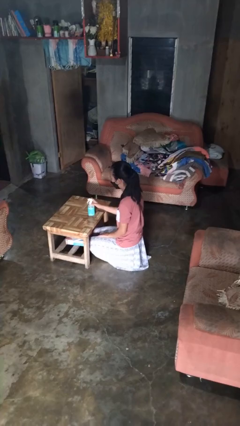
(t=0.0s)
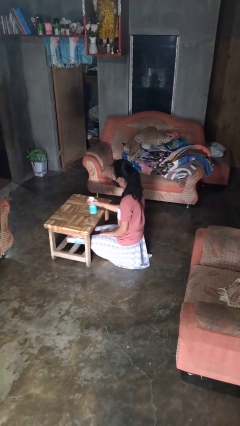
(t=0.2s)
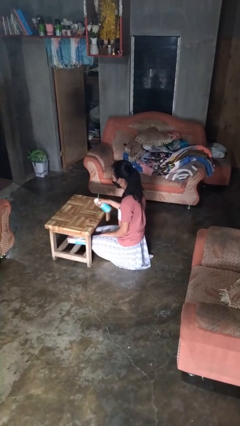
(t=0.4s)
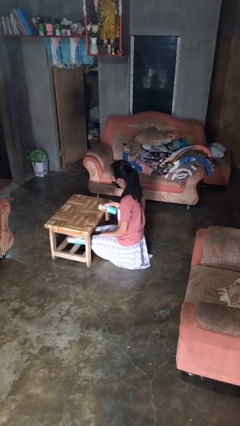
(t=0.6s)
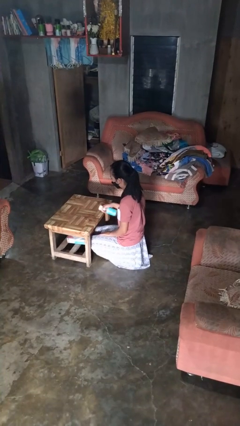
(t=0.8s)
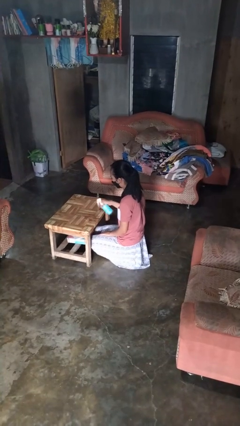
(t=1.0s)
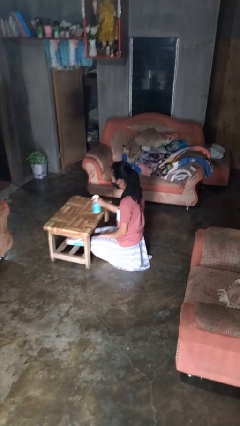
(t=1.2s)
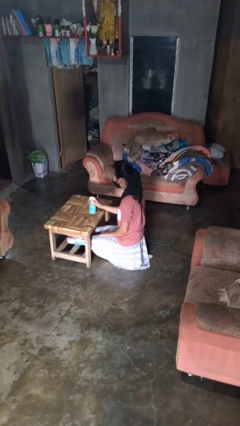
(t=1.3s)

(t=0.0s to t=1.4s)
person sprays from bottle

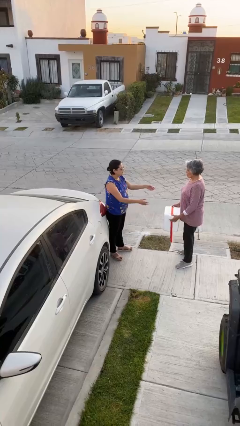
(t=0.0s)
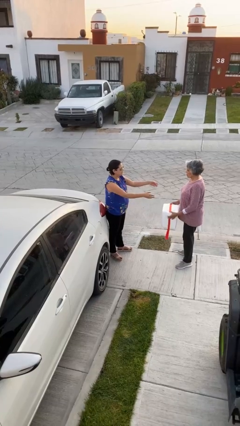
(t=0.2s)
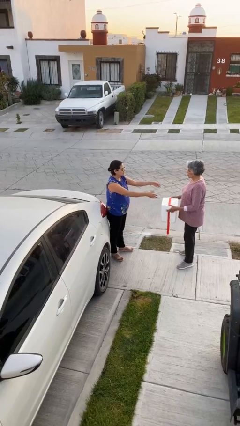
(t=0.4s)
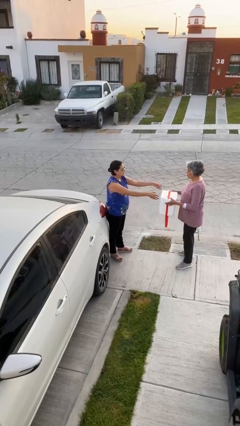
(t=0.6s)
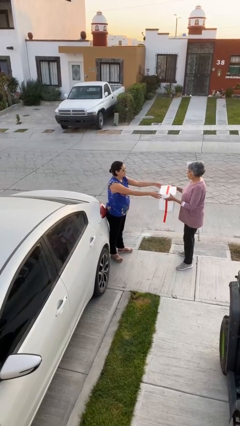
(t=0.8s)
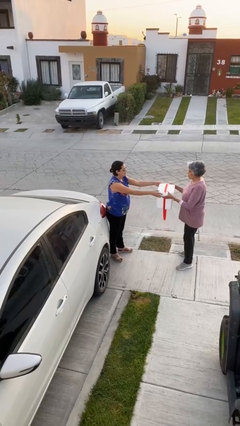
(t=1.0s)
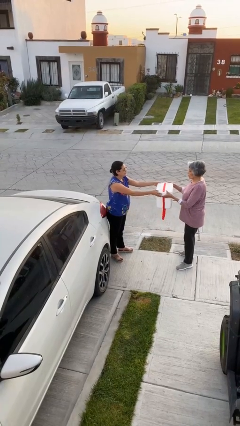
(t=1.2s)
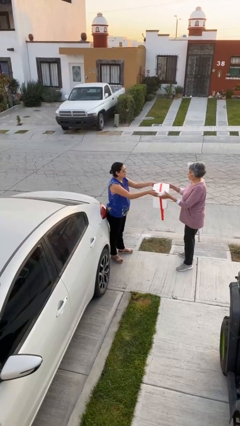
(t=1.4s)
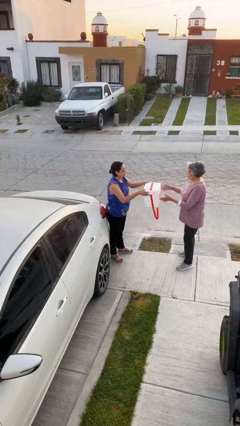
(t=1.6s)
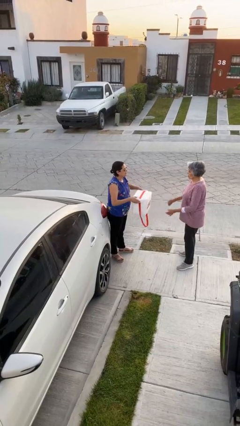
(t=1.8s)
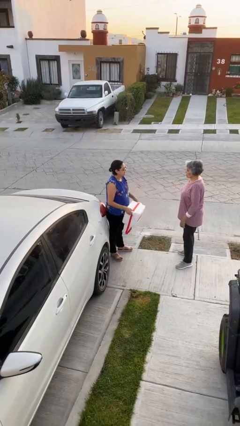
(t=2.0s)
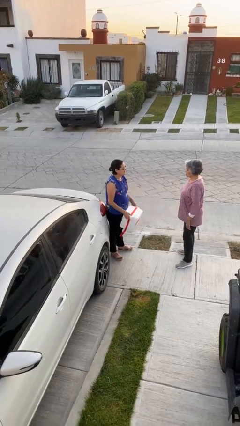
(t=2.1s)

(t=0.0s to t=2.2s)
person transfers object to person

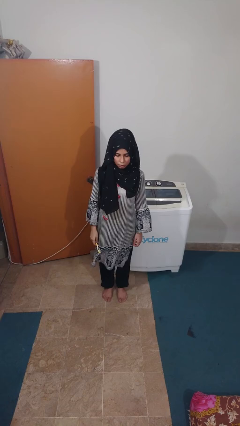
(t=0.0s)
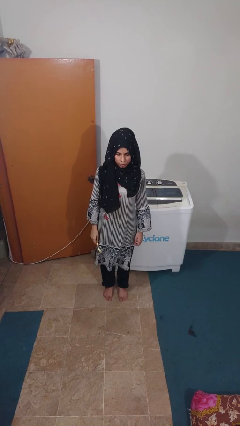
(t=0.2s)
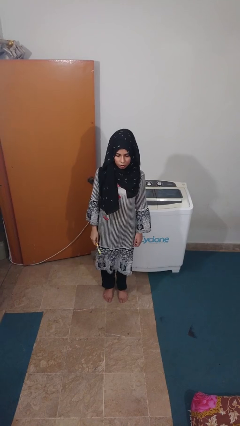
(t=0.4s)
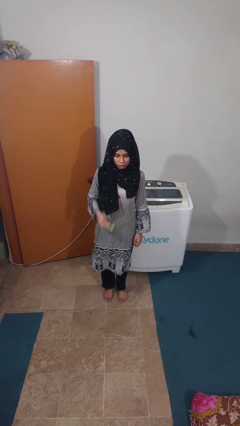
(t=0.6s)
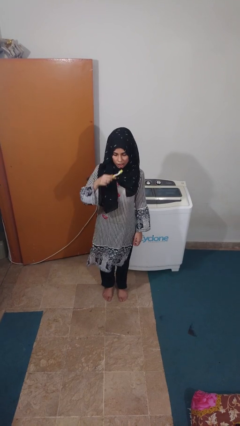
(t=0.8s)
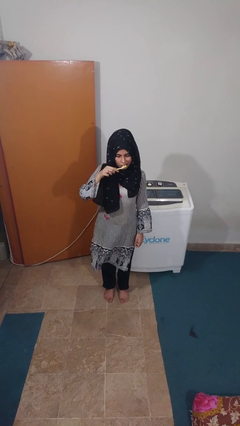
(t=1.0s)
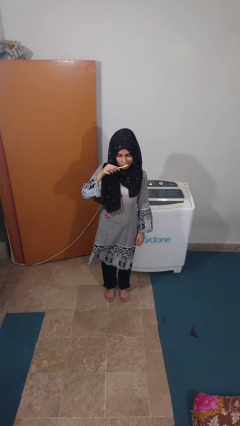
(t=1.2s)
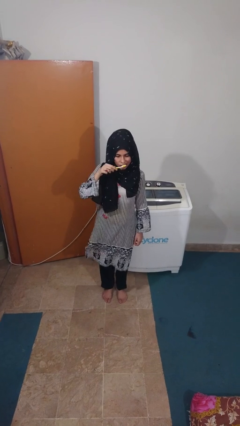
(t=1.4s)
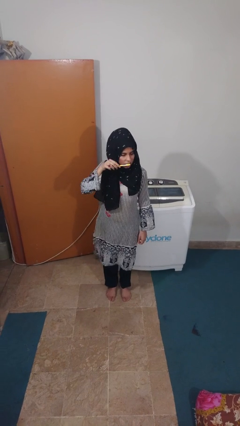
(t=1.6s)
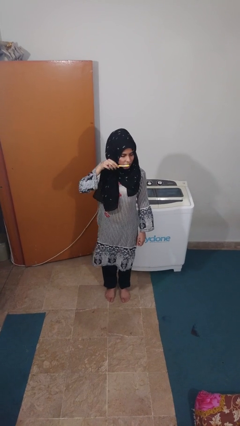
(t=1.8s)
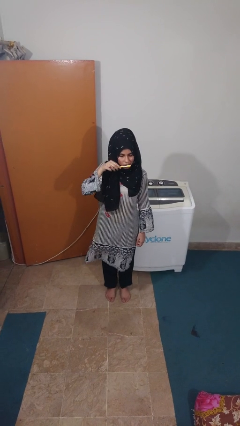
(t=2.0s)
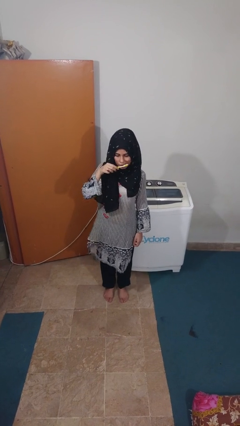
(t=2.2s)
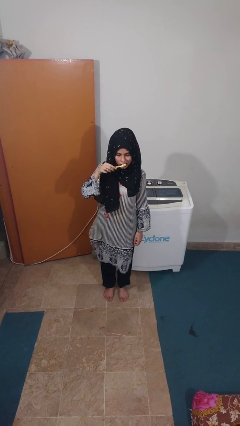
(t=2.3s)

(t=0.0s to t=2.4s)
person brushes teeth

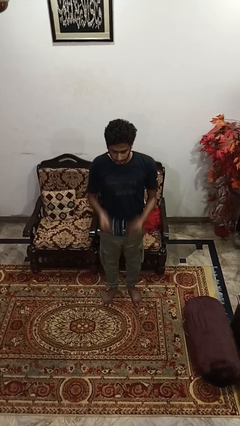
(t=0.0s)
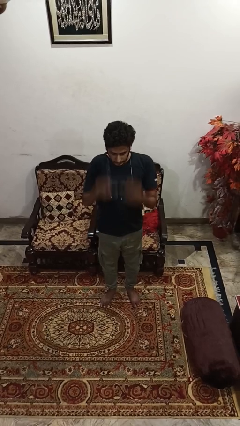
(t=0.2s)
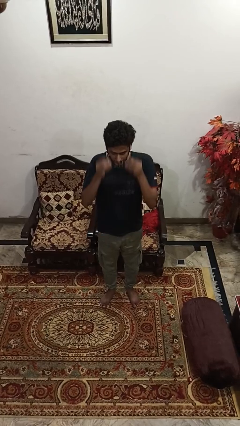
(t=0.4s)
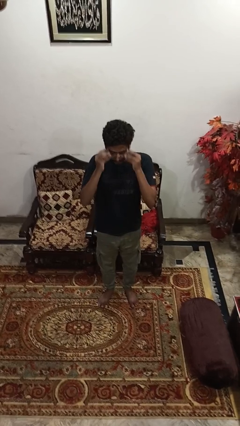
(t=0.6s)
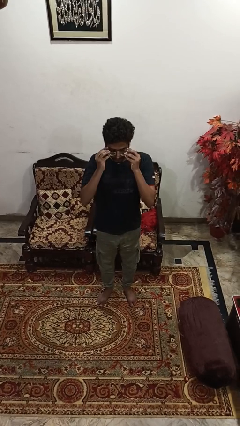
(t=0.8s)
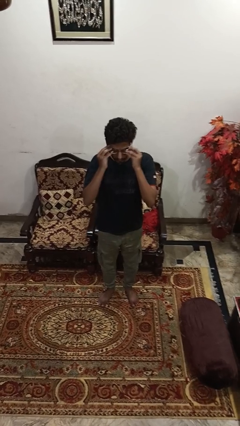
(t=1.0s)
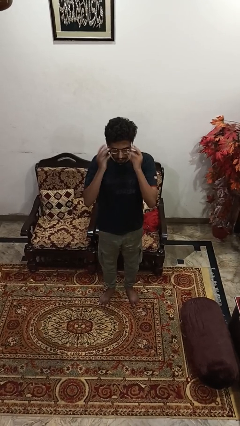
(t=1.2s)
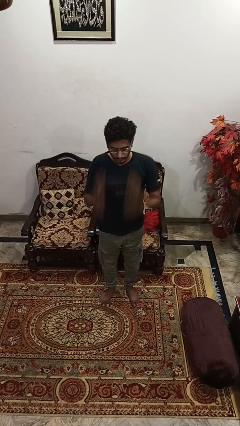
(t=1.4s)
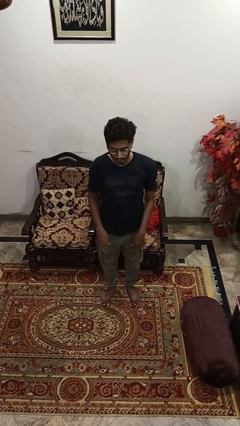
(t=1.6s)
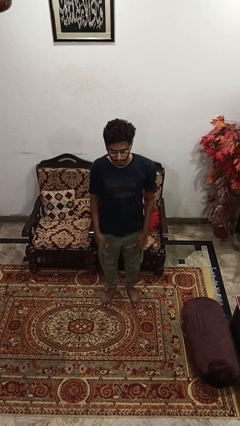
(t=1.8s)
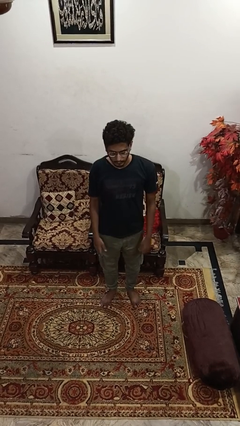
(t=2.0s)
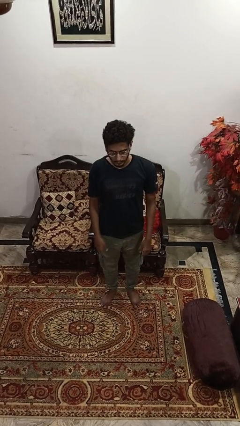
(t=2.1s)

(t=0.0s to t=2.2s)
person puts on glasses

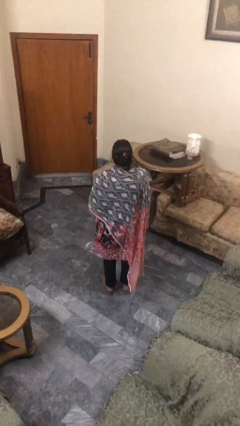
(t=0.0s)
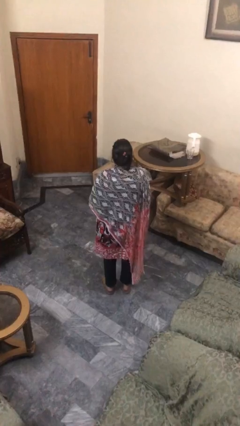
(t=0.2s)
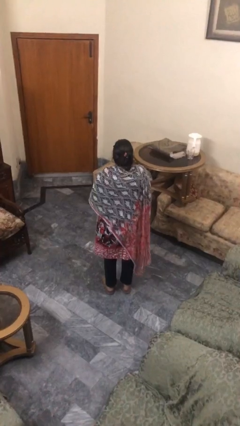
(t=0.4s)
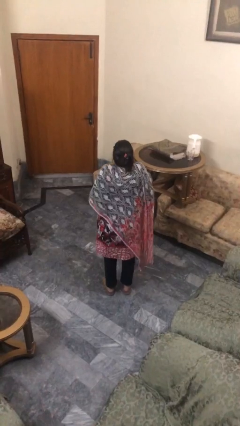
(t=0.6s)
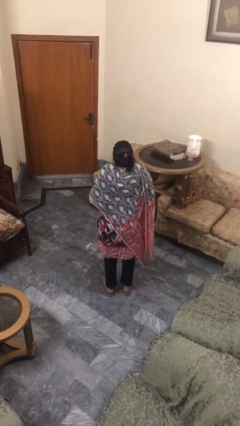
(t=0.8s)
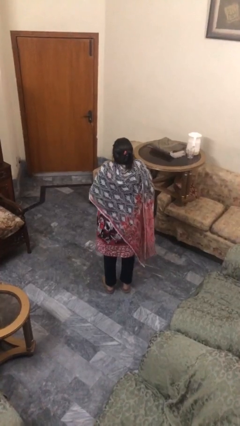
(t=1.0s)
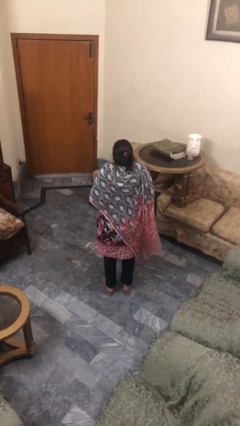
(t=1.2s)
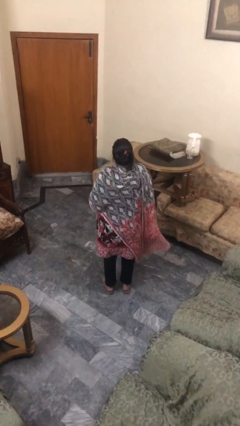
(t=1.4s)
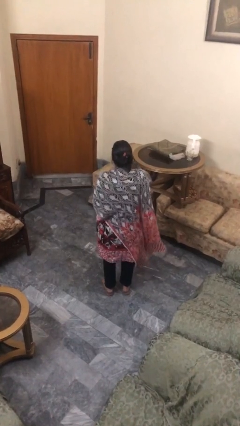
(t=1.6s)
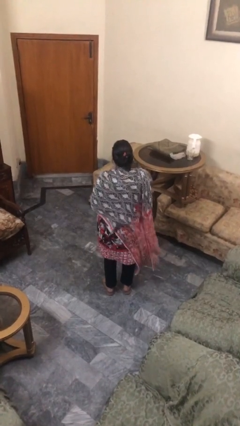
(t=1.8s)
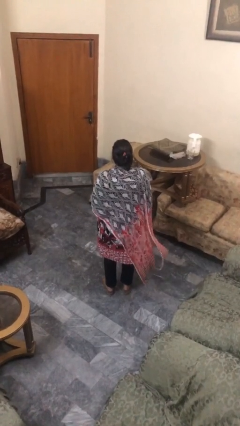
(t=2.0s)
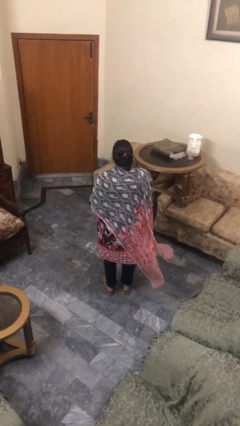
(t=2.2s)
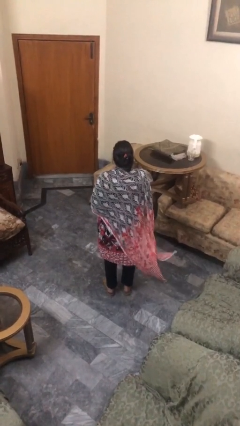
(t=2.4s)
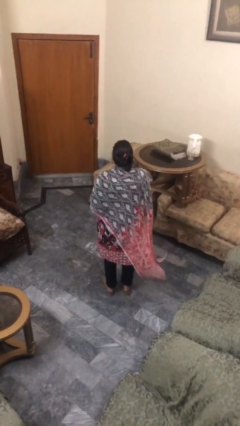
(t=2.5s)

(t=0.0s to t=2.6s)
person shrugs

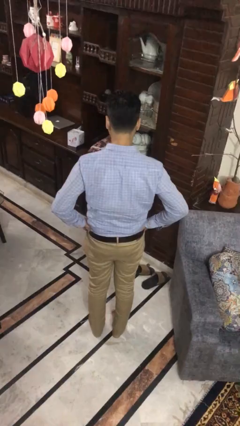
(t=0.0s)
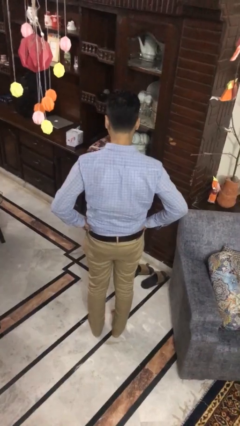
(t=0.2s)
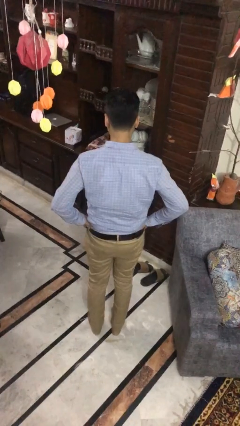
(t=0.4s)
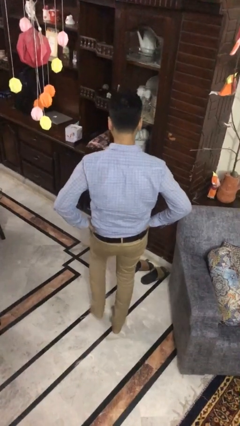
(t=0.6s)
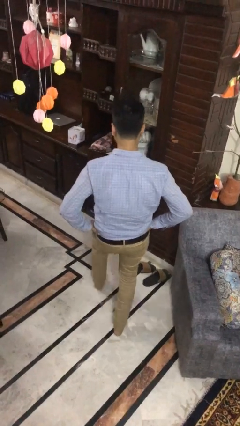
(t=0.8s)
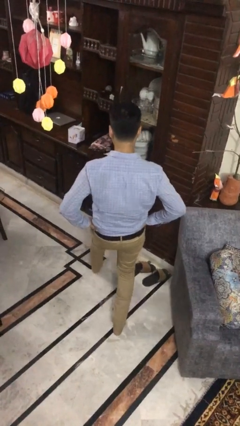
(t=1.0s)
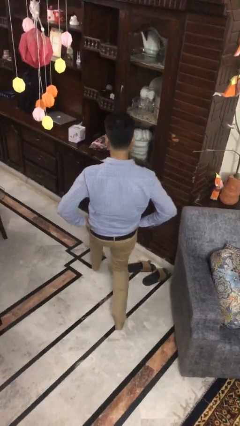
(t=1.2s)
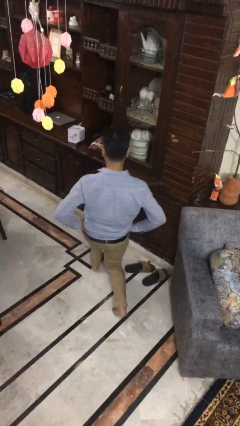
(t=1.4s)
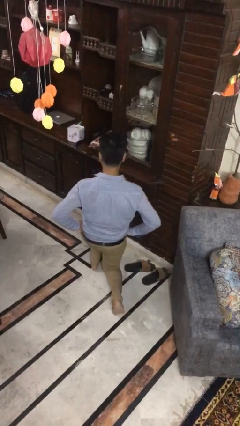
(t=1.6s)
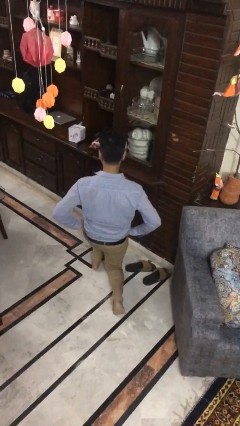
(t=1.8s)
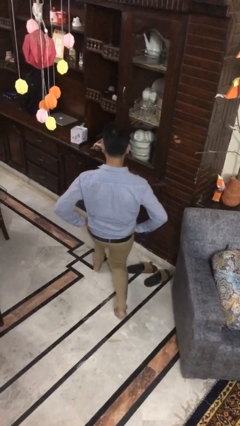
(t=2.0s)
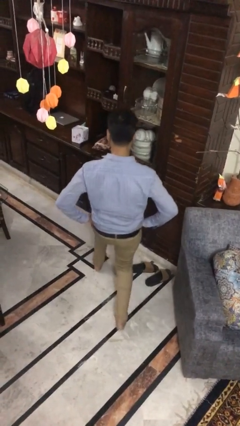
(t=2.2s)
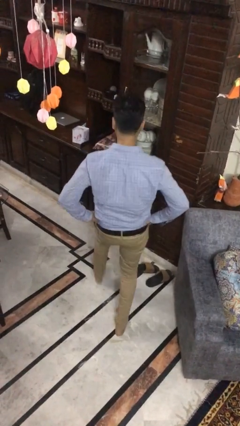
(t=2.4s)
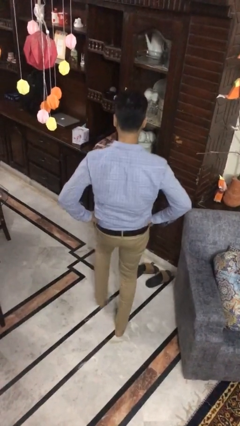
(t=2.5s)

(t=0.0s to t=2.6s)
person exercises with lunges

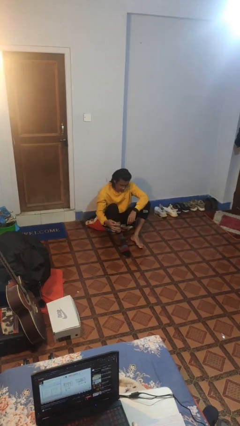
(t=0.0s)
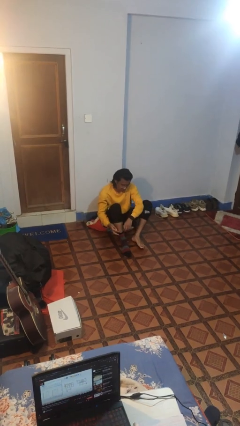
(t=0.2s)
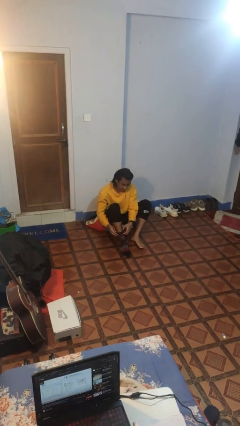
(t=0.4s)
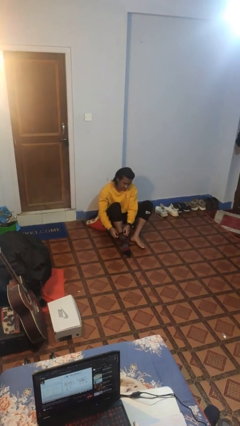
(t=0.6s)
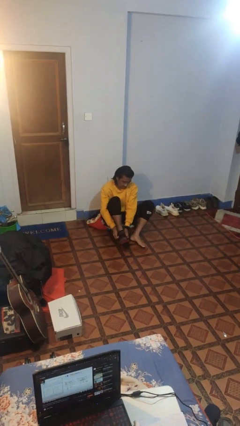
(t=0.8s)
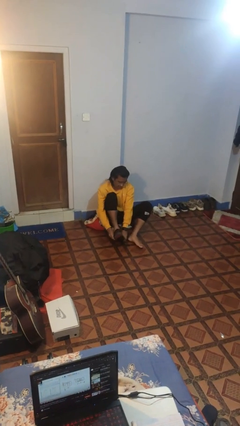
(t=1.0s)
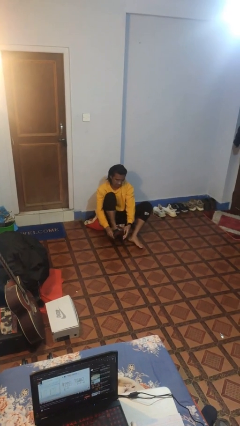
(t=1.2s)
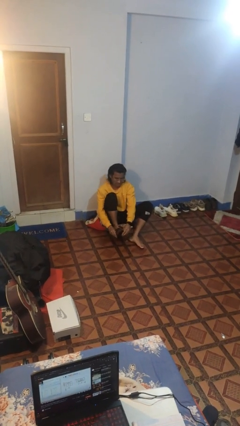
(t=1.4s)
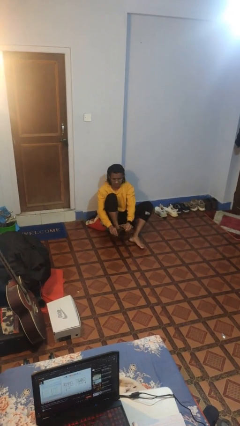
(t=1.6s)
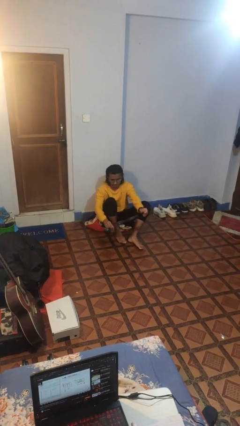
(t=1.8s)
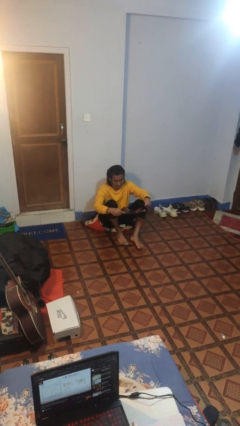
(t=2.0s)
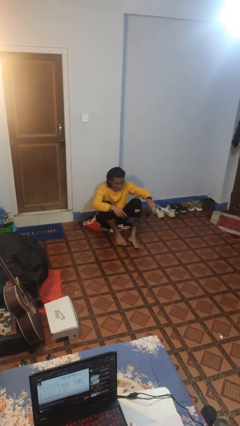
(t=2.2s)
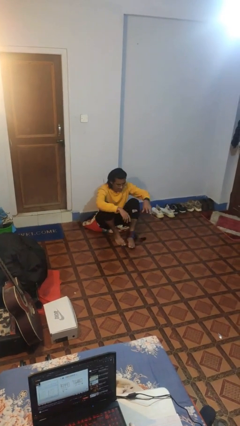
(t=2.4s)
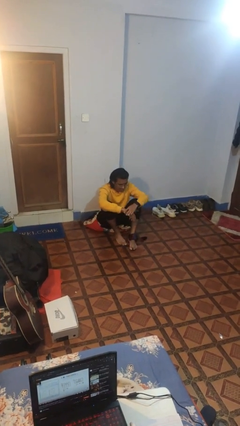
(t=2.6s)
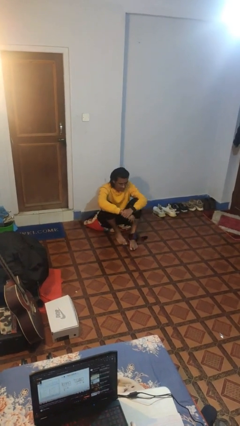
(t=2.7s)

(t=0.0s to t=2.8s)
person takes off socks

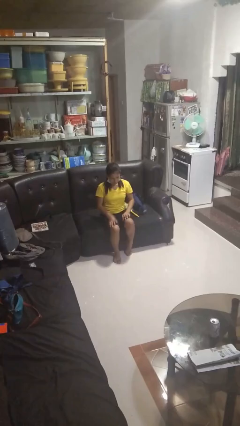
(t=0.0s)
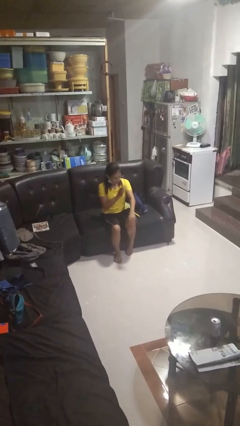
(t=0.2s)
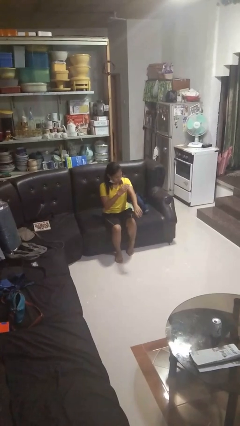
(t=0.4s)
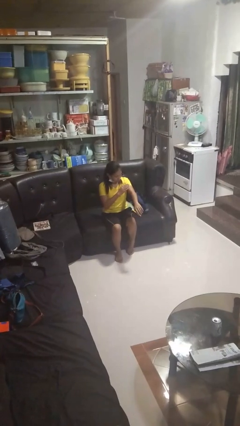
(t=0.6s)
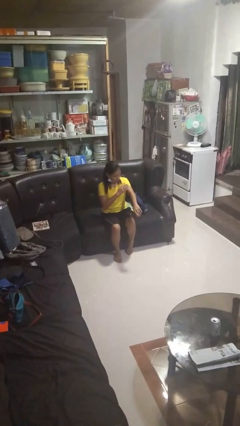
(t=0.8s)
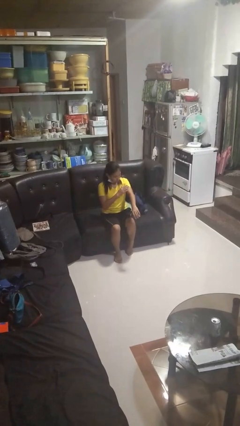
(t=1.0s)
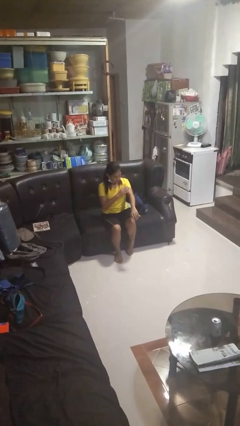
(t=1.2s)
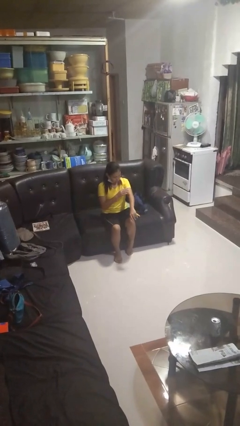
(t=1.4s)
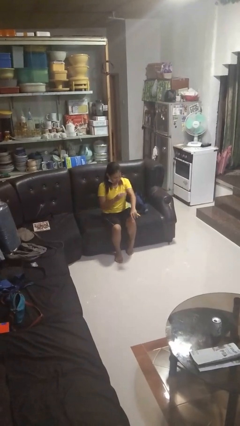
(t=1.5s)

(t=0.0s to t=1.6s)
person swats bug
